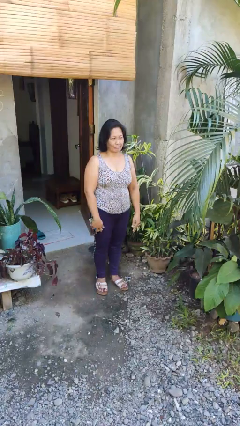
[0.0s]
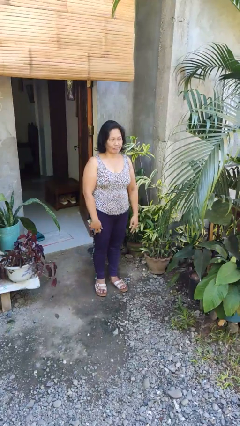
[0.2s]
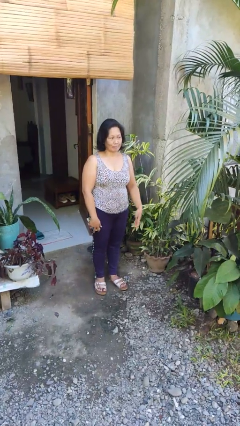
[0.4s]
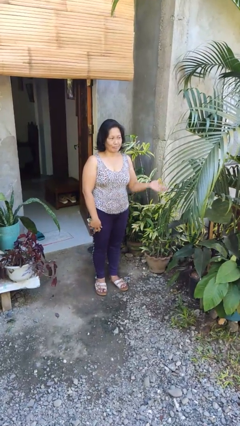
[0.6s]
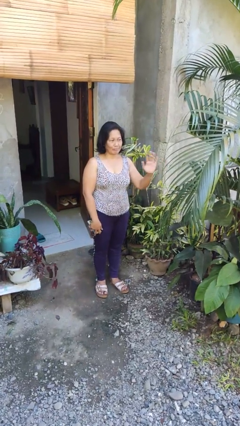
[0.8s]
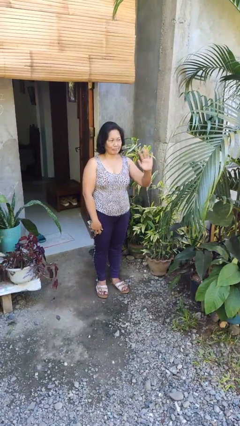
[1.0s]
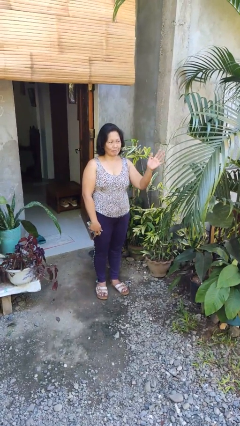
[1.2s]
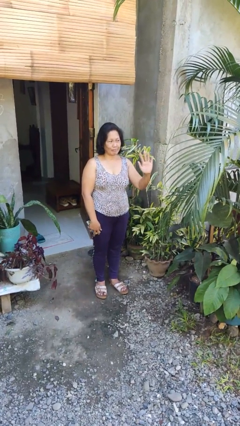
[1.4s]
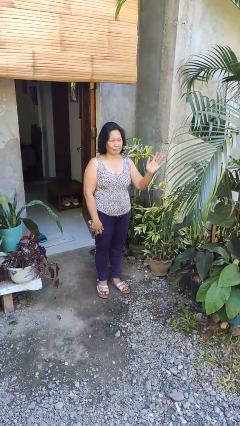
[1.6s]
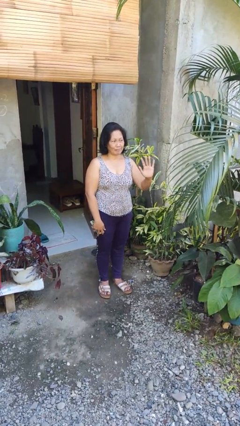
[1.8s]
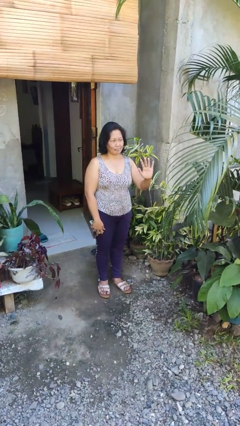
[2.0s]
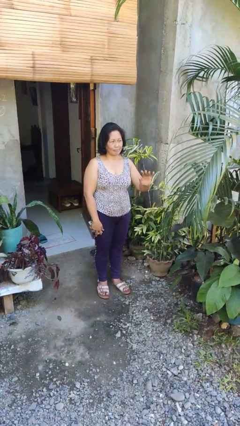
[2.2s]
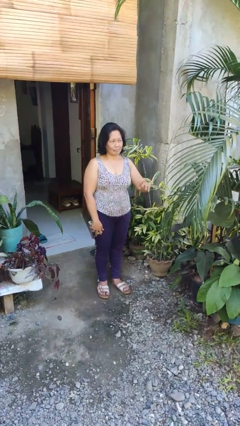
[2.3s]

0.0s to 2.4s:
person waves at person

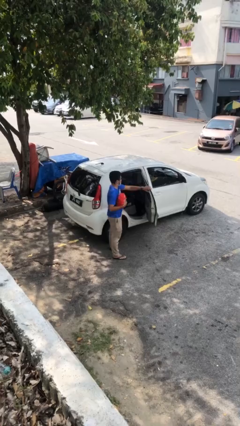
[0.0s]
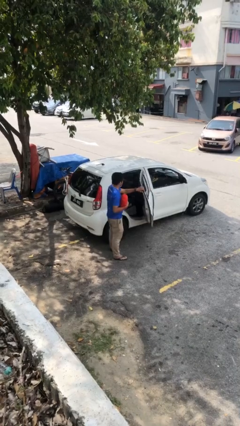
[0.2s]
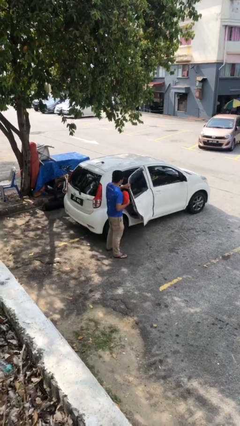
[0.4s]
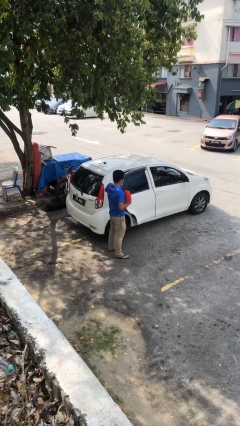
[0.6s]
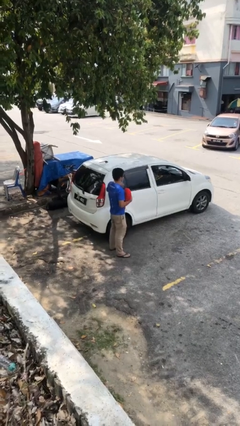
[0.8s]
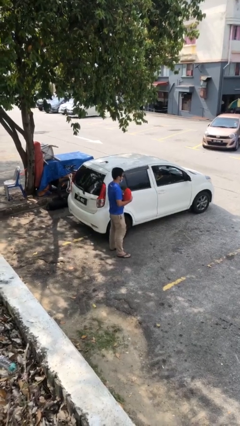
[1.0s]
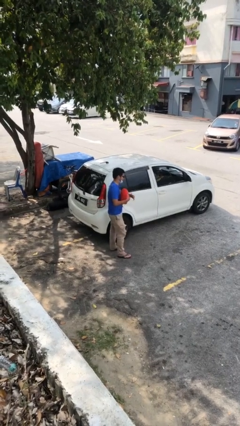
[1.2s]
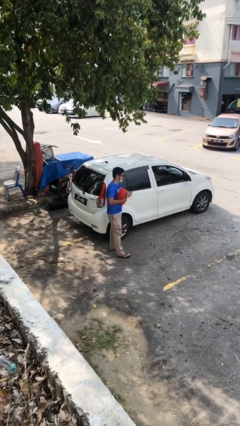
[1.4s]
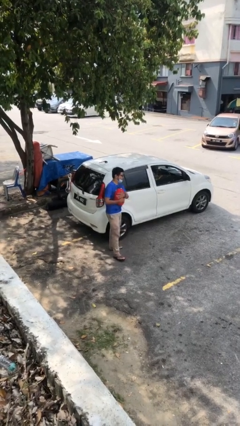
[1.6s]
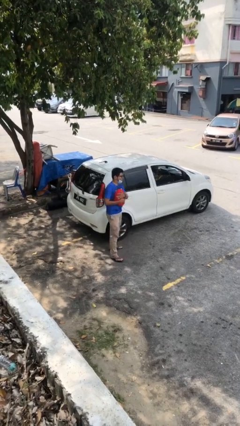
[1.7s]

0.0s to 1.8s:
person closes car door

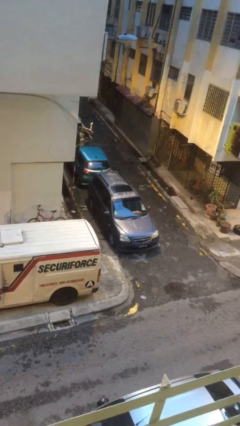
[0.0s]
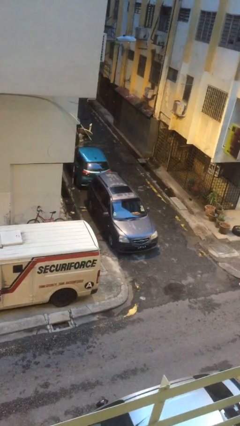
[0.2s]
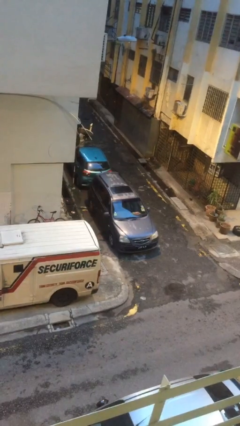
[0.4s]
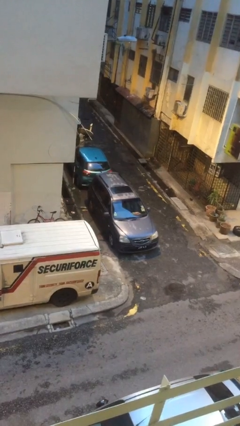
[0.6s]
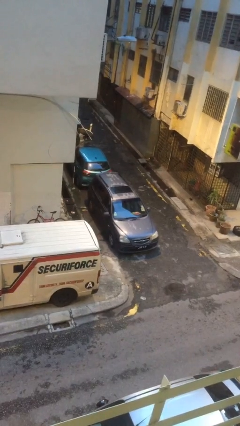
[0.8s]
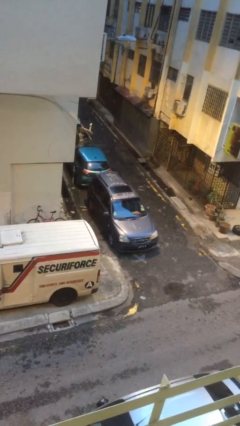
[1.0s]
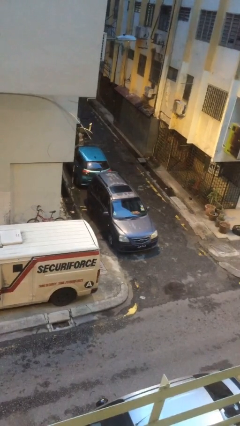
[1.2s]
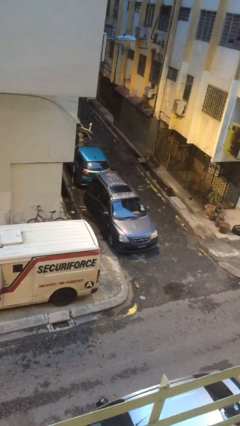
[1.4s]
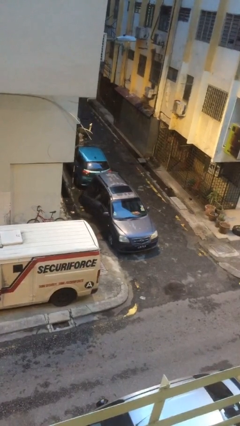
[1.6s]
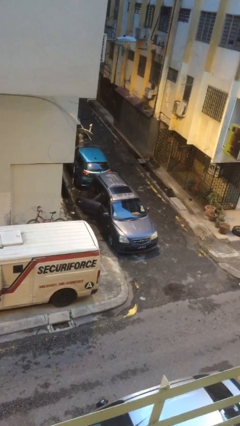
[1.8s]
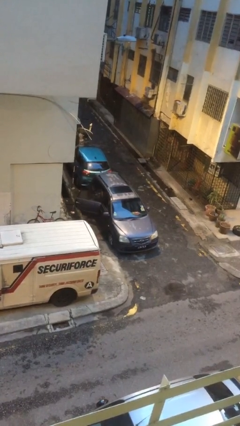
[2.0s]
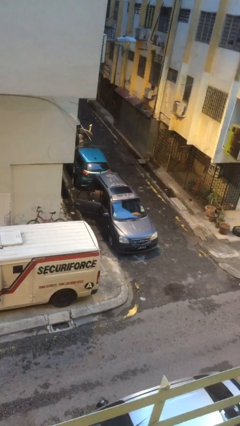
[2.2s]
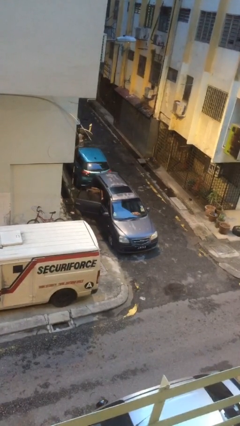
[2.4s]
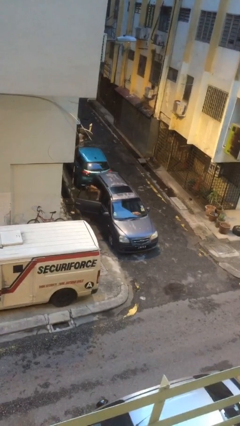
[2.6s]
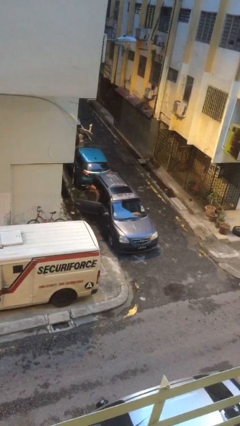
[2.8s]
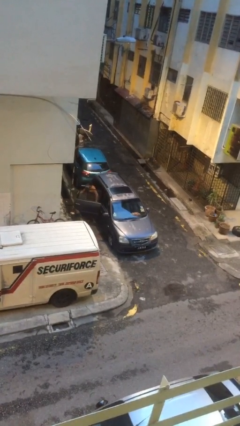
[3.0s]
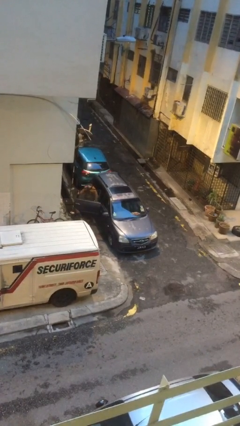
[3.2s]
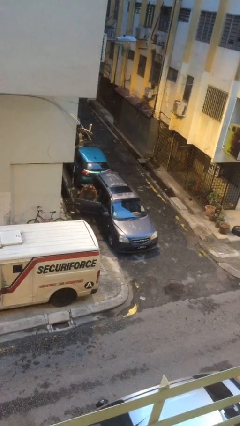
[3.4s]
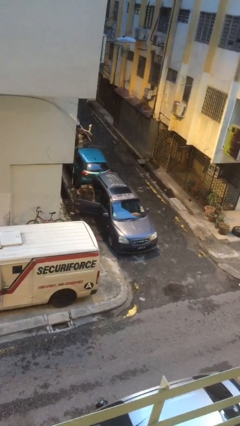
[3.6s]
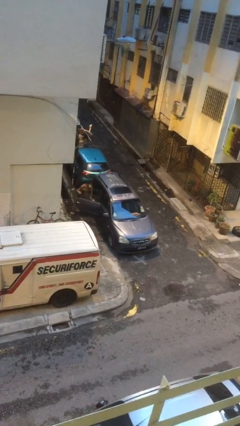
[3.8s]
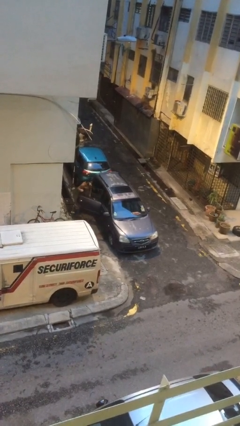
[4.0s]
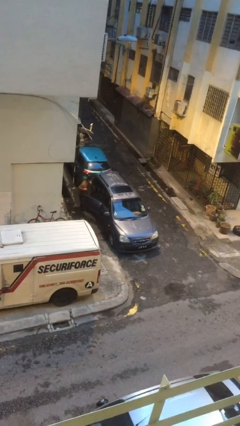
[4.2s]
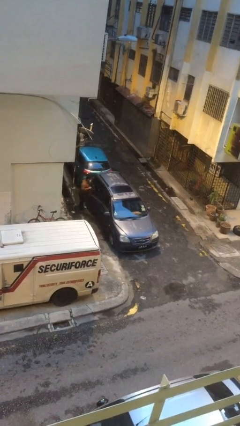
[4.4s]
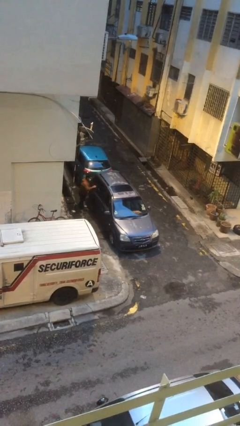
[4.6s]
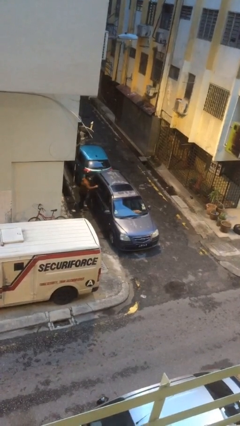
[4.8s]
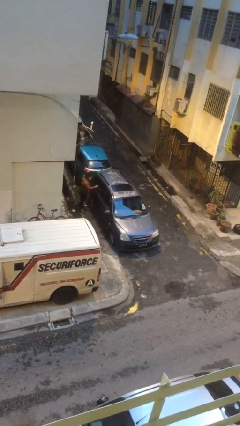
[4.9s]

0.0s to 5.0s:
car drops off person

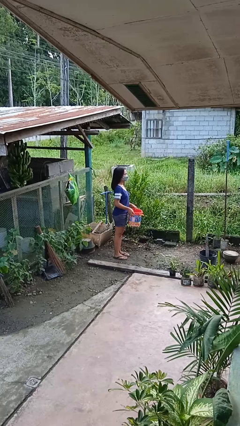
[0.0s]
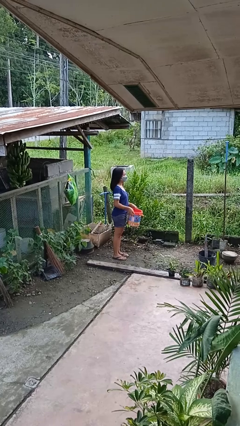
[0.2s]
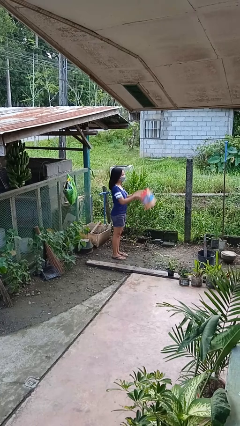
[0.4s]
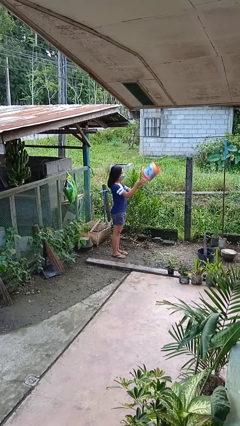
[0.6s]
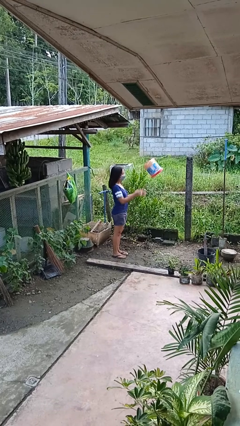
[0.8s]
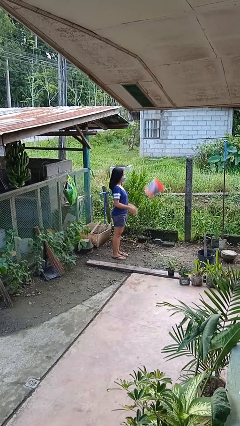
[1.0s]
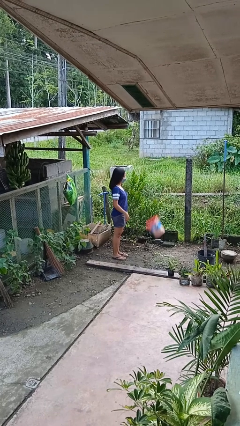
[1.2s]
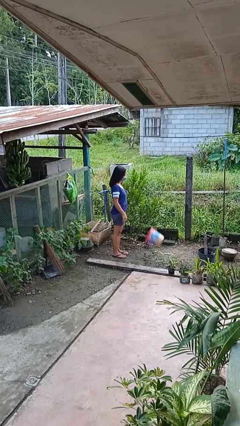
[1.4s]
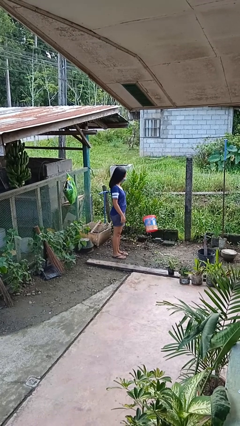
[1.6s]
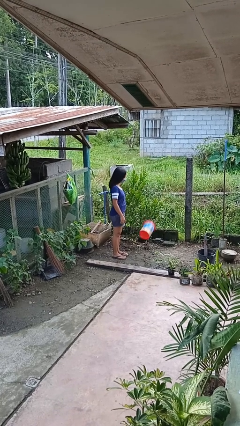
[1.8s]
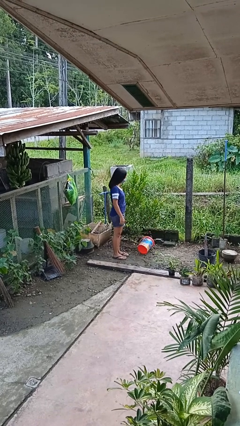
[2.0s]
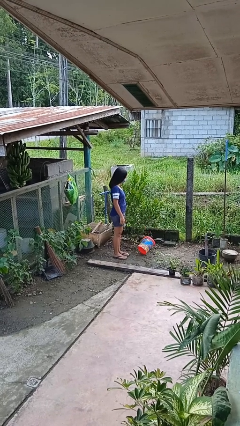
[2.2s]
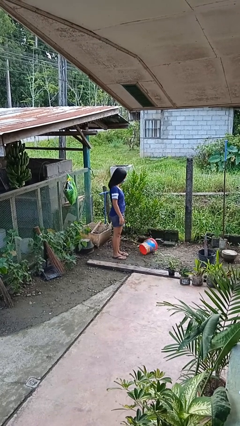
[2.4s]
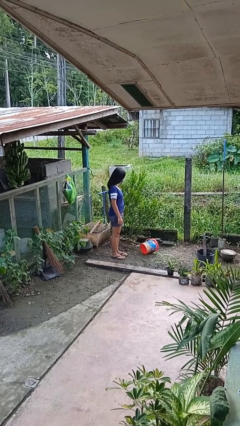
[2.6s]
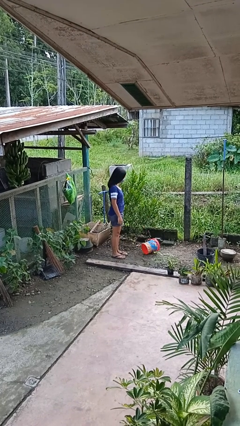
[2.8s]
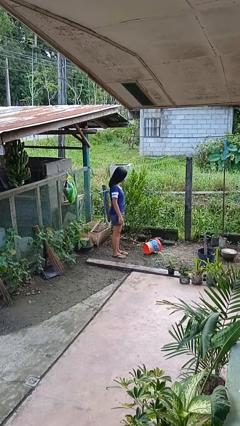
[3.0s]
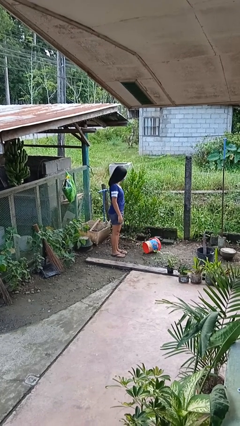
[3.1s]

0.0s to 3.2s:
person throws object into air

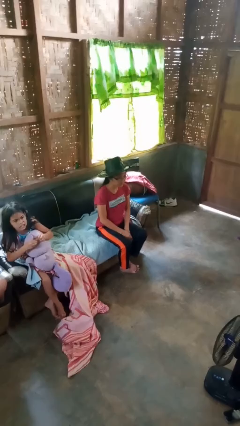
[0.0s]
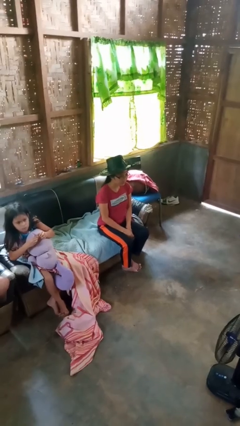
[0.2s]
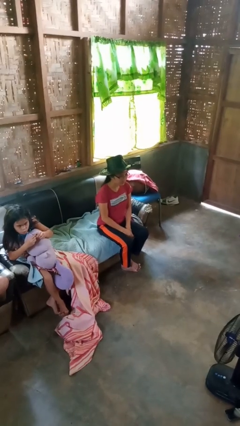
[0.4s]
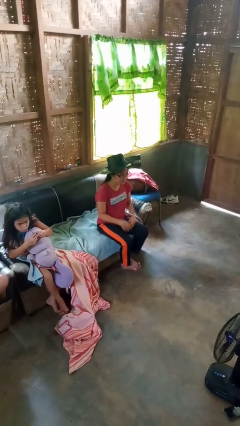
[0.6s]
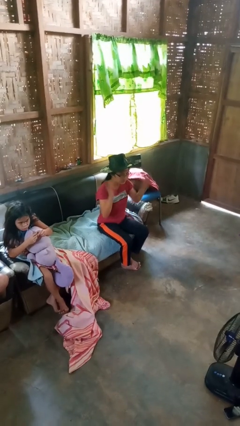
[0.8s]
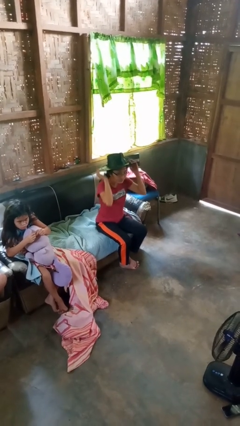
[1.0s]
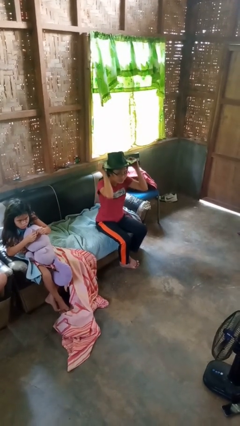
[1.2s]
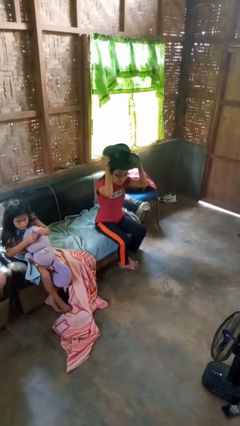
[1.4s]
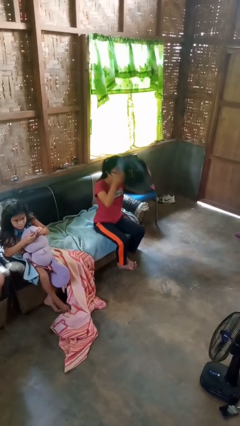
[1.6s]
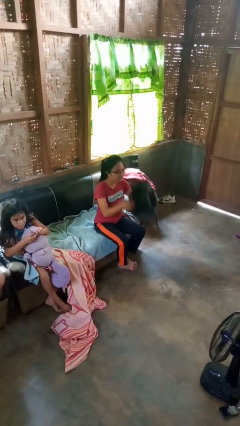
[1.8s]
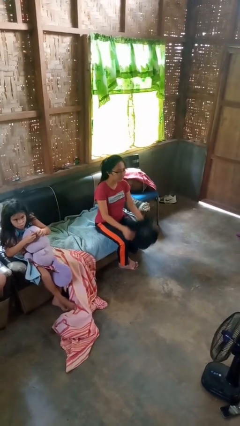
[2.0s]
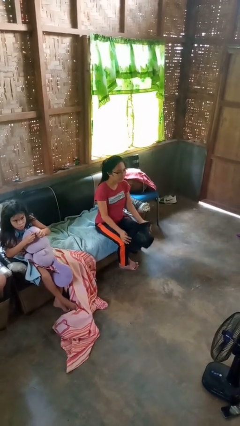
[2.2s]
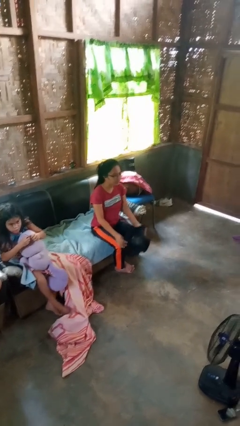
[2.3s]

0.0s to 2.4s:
person takes off hat

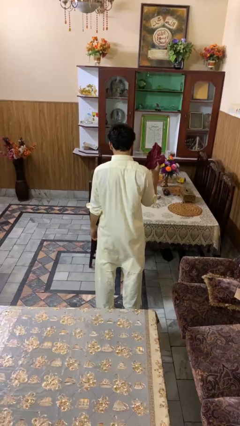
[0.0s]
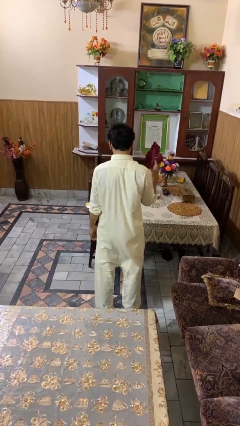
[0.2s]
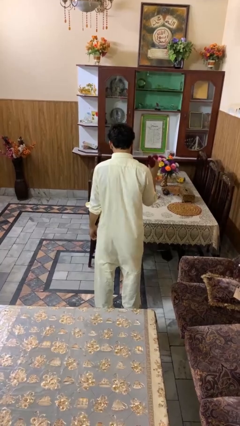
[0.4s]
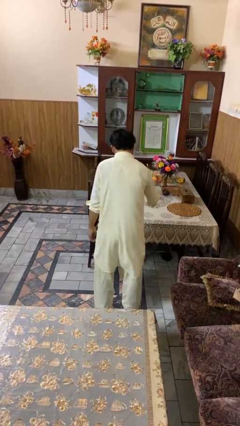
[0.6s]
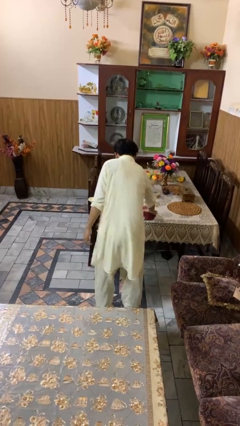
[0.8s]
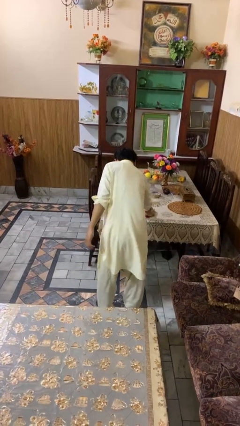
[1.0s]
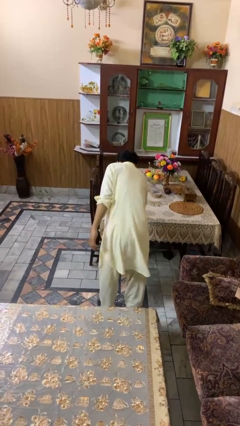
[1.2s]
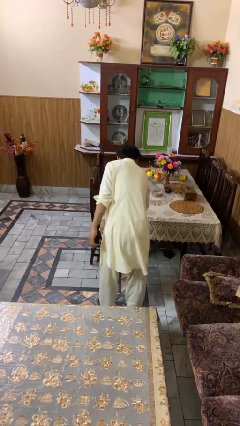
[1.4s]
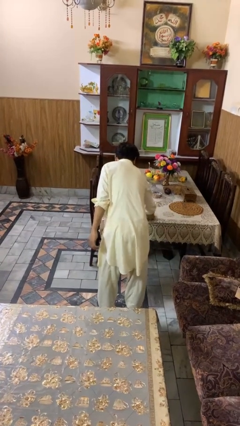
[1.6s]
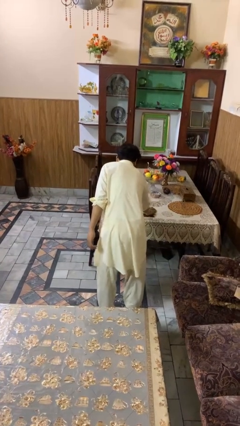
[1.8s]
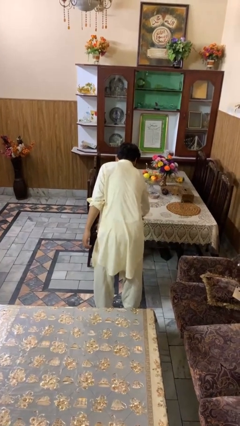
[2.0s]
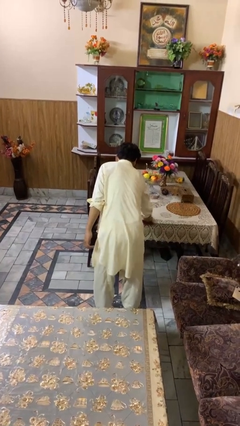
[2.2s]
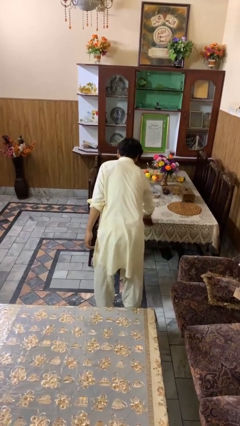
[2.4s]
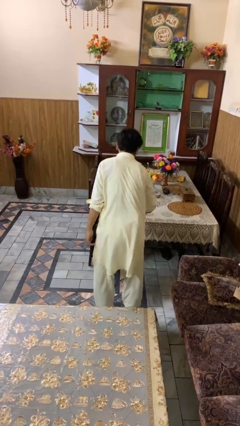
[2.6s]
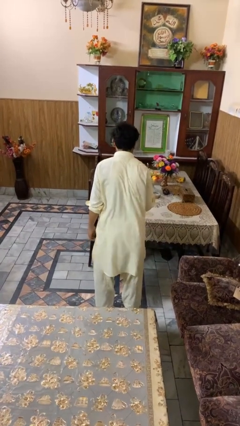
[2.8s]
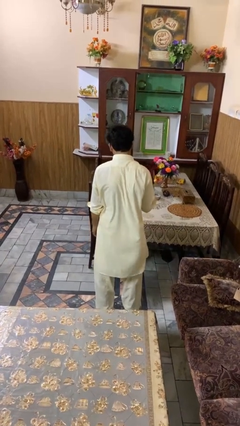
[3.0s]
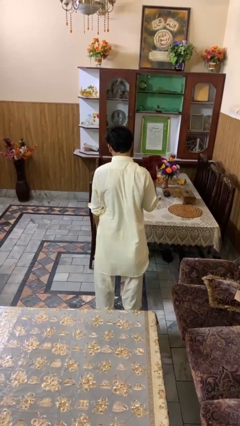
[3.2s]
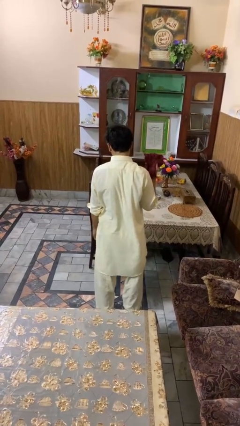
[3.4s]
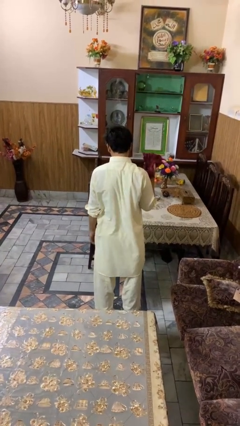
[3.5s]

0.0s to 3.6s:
person cleans table with rag
